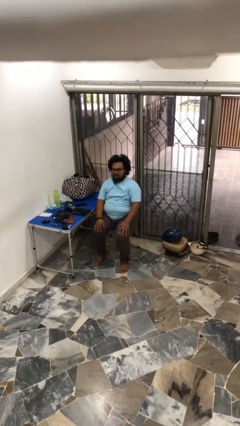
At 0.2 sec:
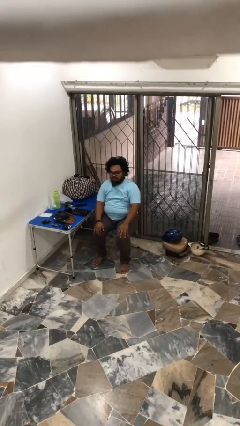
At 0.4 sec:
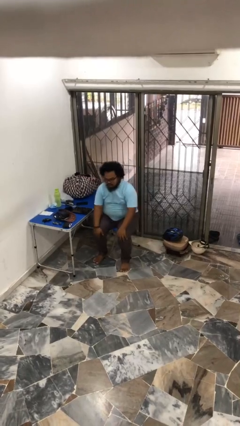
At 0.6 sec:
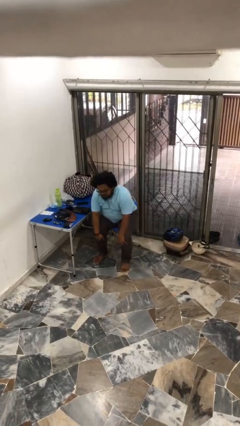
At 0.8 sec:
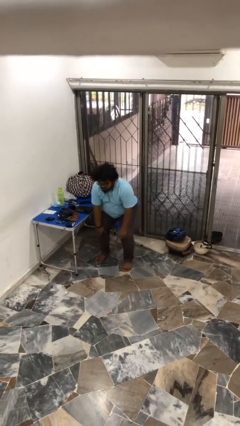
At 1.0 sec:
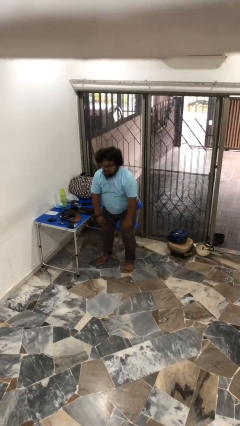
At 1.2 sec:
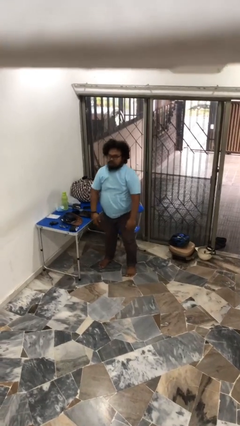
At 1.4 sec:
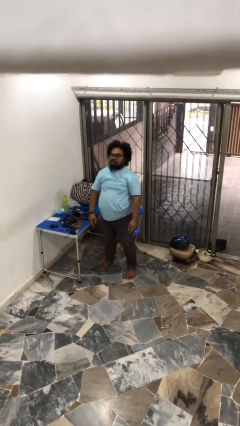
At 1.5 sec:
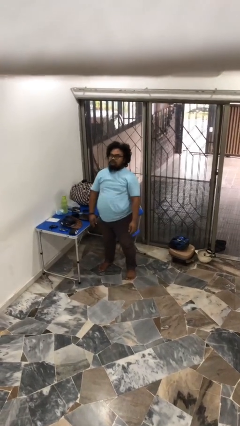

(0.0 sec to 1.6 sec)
person stands up

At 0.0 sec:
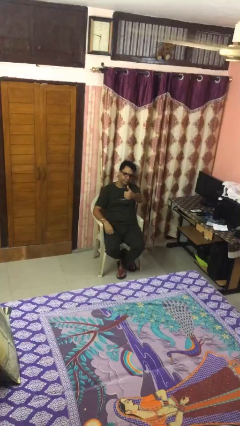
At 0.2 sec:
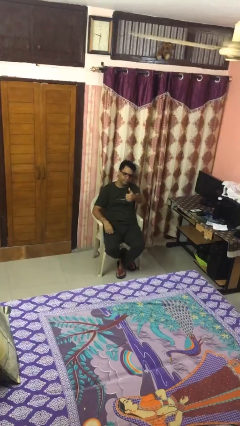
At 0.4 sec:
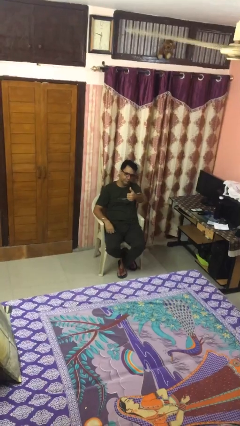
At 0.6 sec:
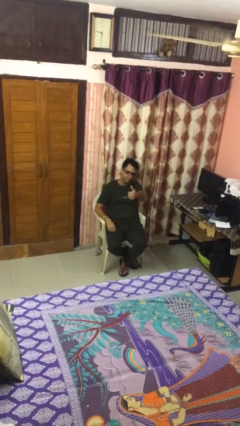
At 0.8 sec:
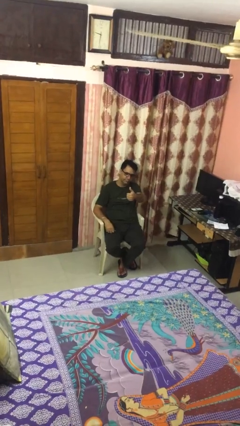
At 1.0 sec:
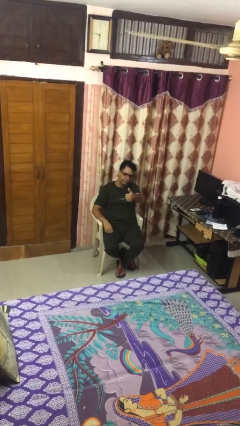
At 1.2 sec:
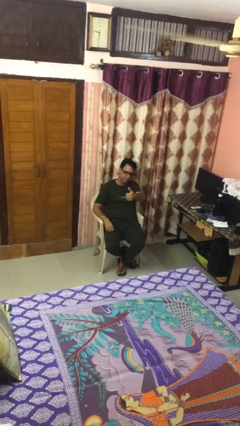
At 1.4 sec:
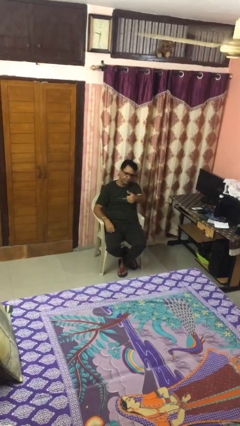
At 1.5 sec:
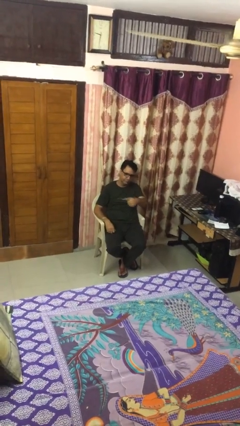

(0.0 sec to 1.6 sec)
person gestures thumbs up

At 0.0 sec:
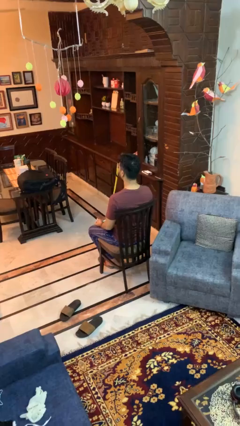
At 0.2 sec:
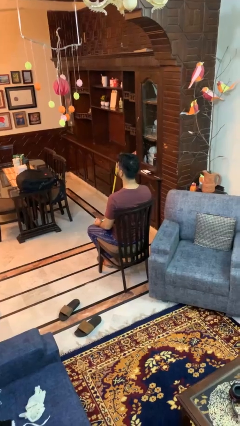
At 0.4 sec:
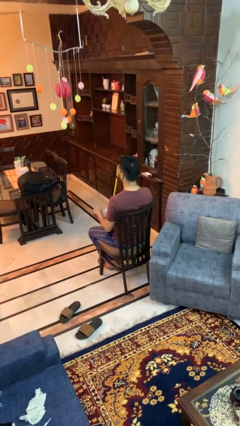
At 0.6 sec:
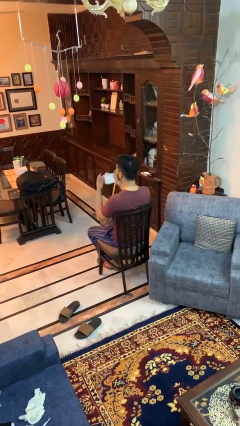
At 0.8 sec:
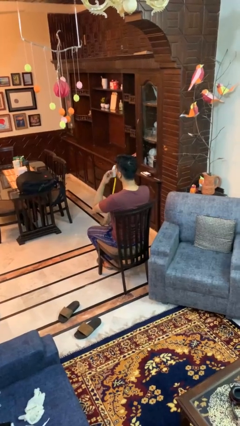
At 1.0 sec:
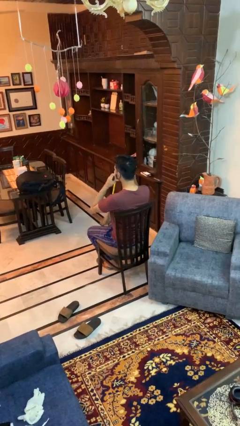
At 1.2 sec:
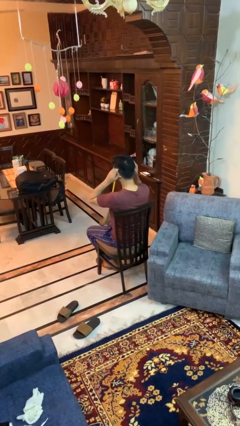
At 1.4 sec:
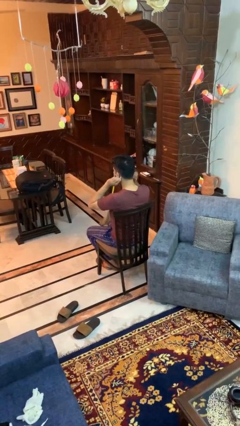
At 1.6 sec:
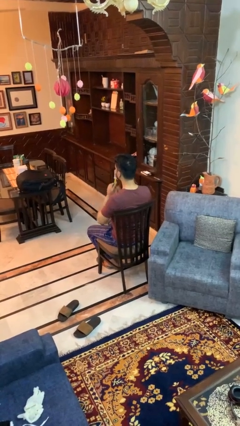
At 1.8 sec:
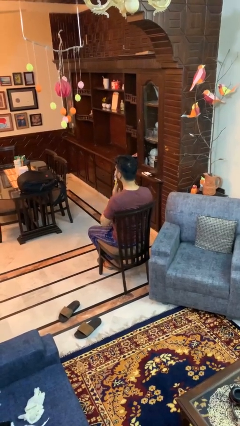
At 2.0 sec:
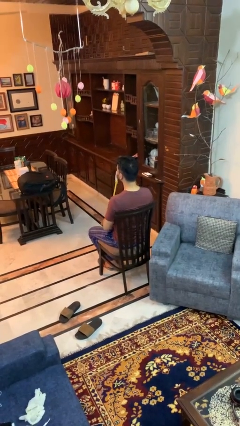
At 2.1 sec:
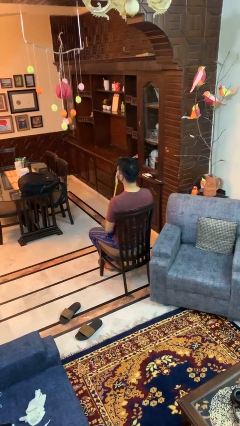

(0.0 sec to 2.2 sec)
person puts on facemask

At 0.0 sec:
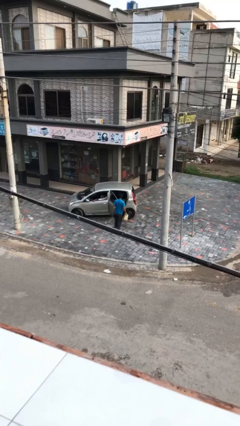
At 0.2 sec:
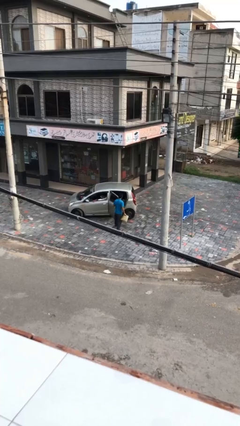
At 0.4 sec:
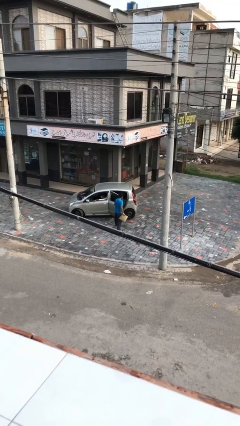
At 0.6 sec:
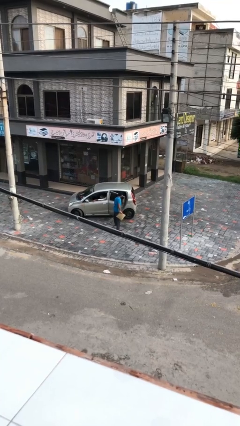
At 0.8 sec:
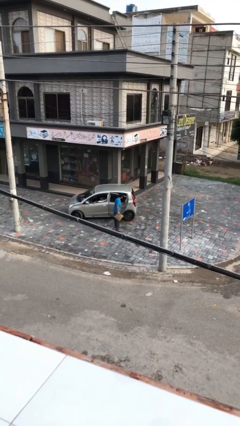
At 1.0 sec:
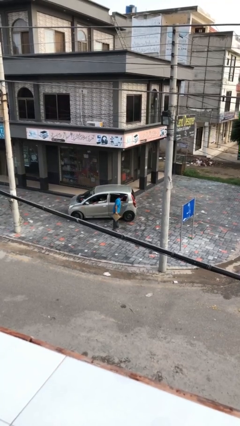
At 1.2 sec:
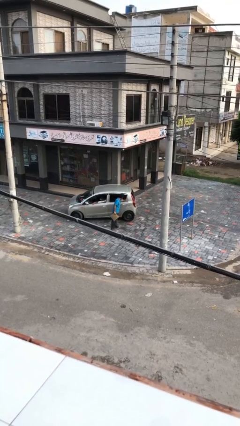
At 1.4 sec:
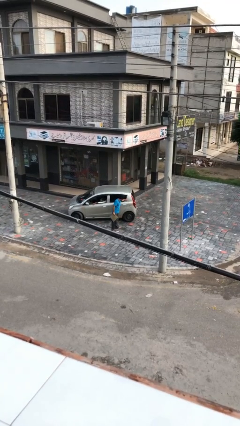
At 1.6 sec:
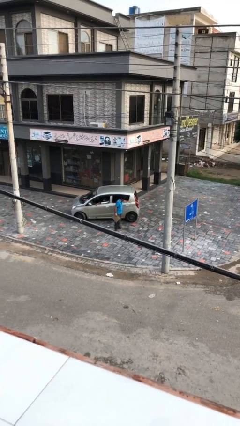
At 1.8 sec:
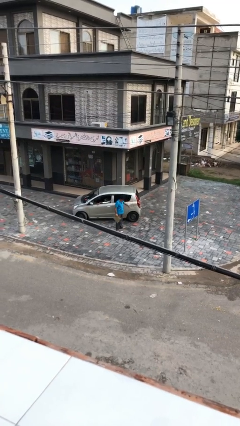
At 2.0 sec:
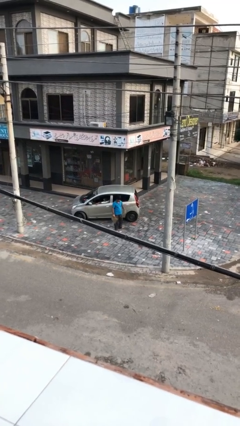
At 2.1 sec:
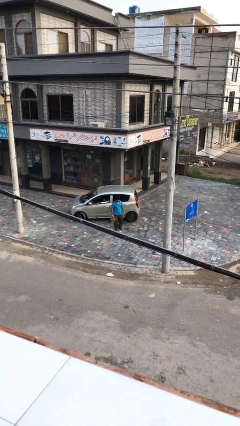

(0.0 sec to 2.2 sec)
person closes car door

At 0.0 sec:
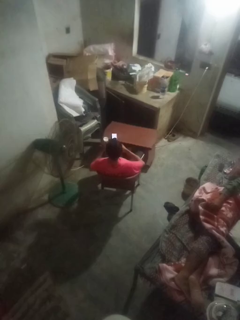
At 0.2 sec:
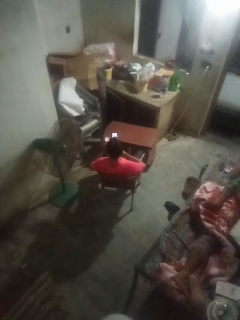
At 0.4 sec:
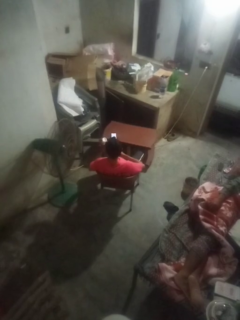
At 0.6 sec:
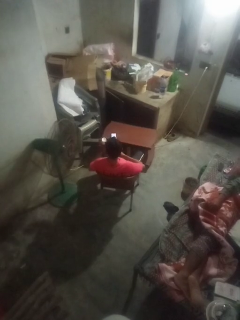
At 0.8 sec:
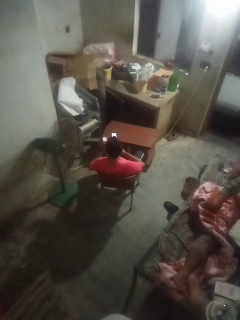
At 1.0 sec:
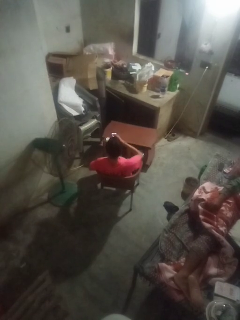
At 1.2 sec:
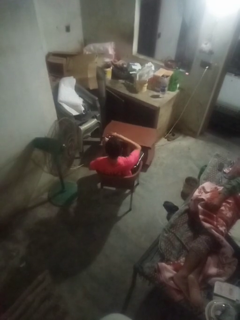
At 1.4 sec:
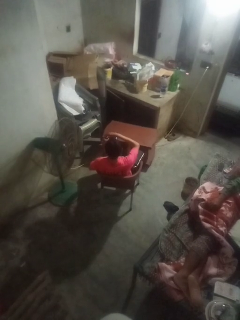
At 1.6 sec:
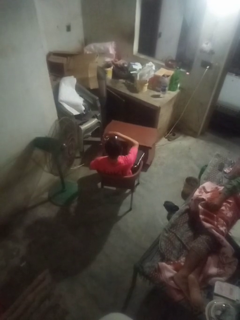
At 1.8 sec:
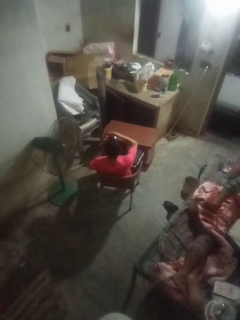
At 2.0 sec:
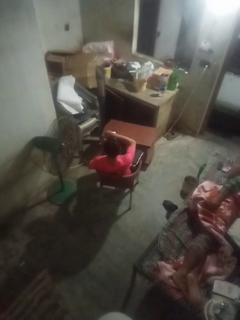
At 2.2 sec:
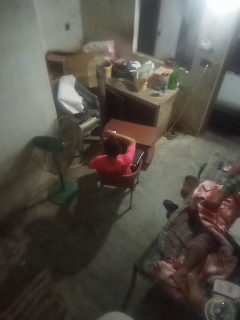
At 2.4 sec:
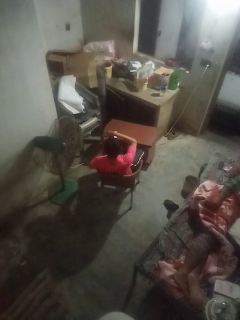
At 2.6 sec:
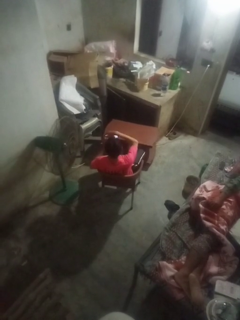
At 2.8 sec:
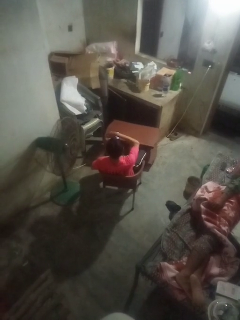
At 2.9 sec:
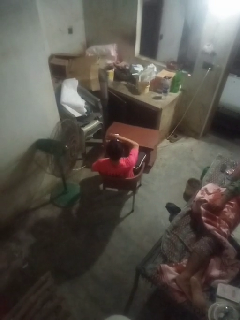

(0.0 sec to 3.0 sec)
person closes jar

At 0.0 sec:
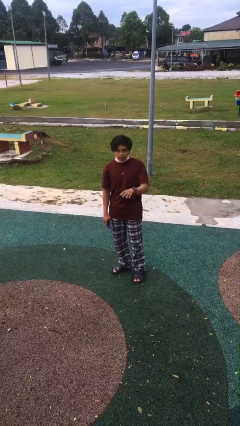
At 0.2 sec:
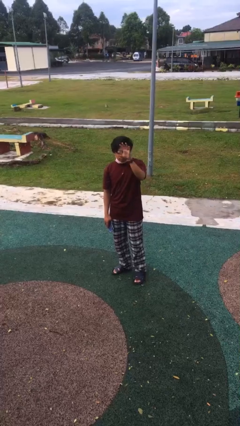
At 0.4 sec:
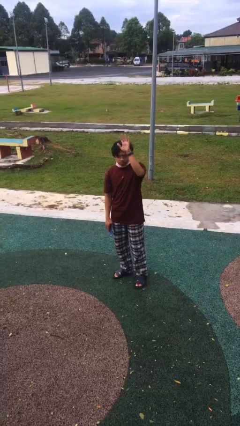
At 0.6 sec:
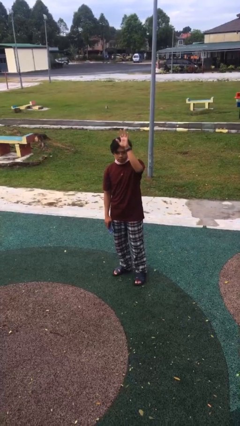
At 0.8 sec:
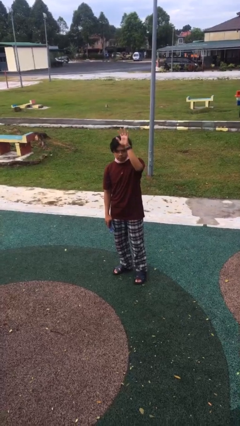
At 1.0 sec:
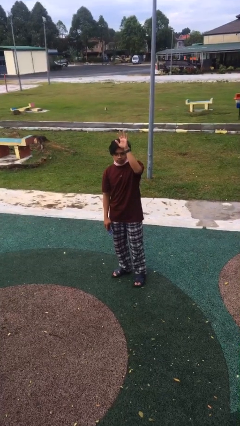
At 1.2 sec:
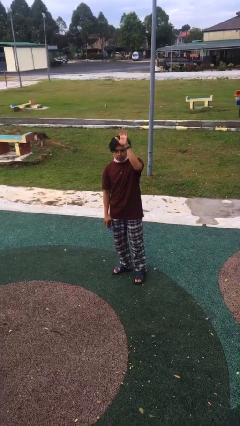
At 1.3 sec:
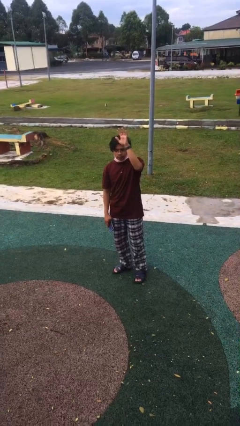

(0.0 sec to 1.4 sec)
person gestures raise hand

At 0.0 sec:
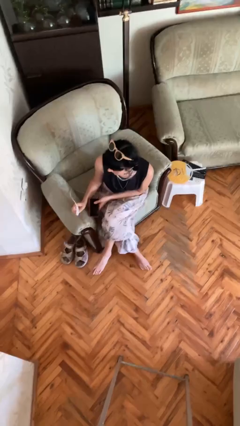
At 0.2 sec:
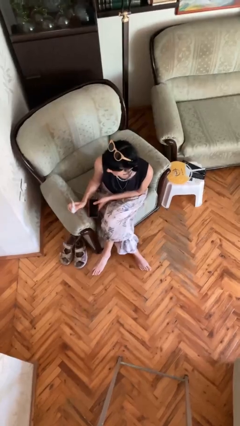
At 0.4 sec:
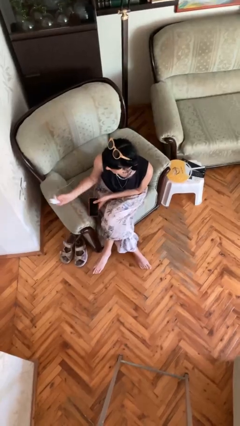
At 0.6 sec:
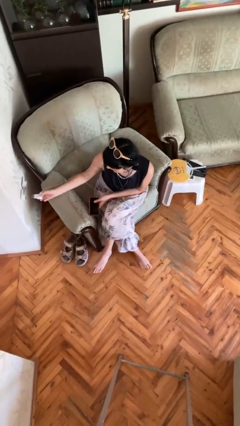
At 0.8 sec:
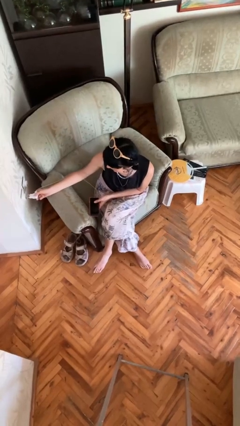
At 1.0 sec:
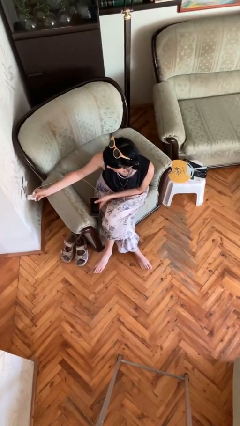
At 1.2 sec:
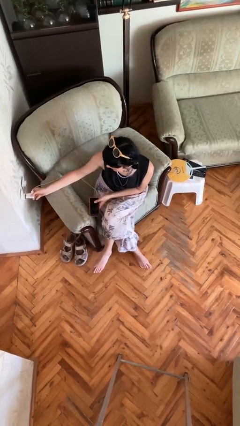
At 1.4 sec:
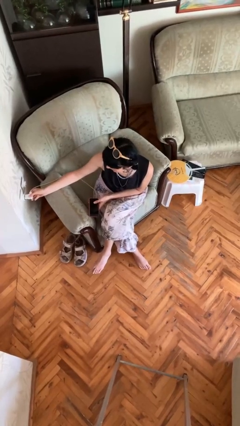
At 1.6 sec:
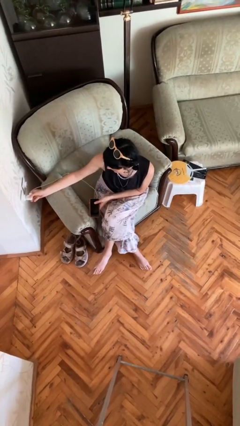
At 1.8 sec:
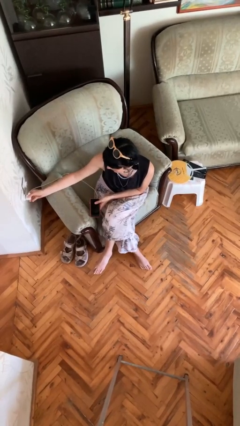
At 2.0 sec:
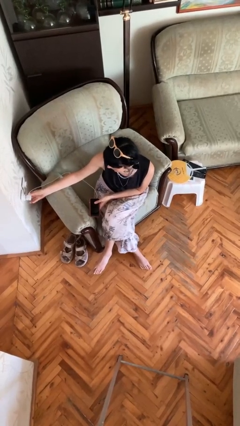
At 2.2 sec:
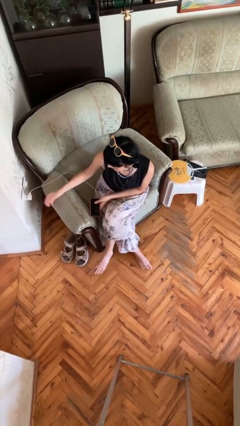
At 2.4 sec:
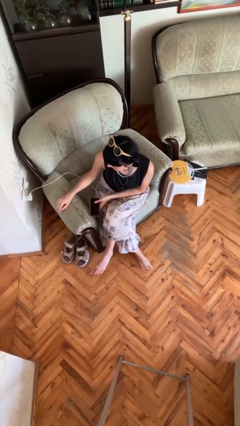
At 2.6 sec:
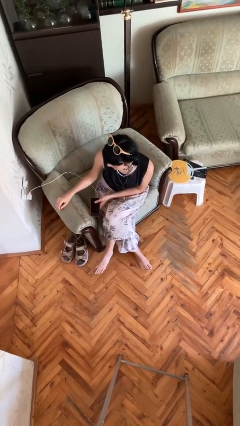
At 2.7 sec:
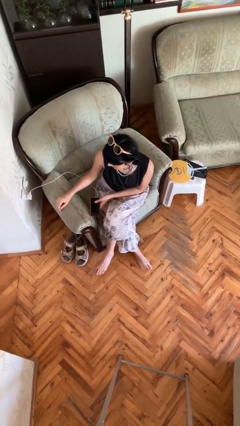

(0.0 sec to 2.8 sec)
person plugs into electrical socket

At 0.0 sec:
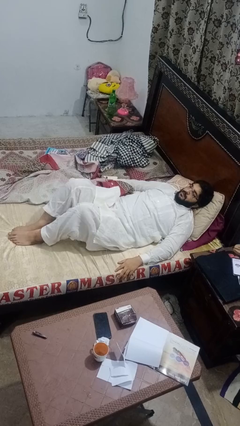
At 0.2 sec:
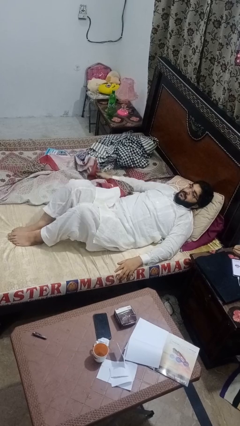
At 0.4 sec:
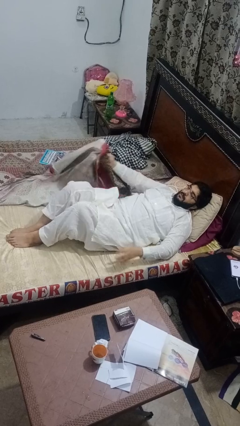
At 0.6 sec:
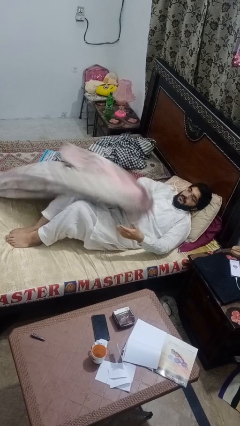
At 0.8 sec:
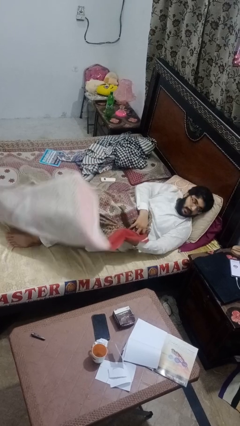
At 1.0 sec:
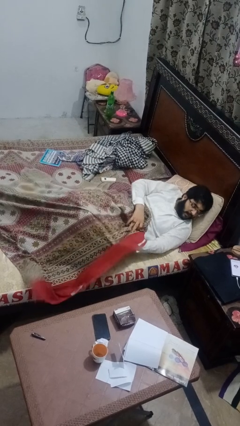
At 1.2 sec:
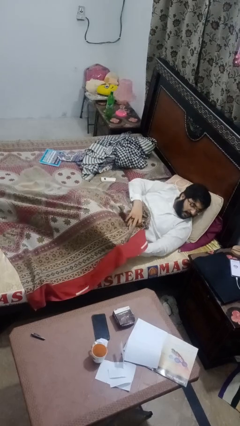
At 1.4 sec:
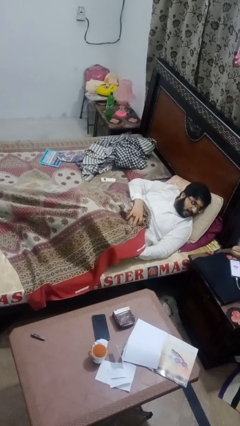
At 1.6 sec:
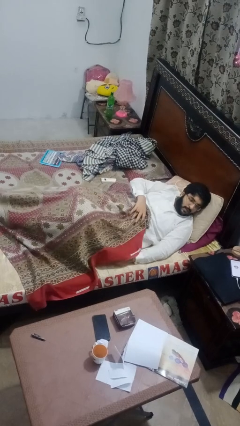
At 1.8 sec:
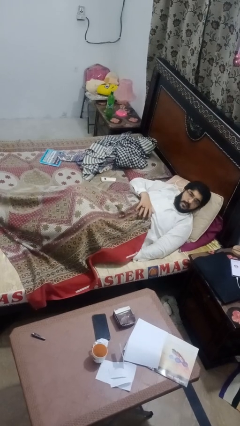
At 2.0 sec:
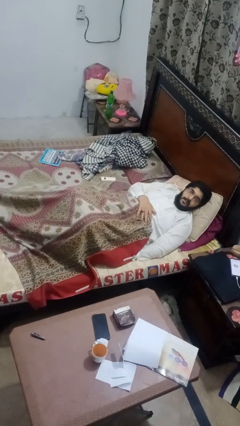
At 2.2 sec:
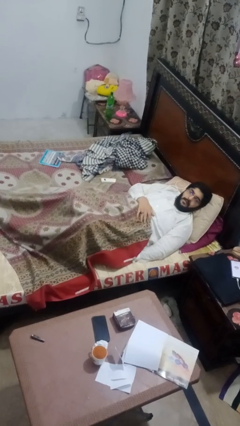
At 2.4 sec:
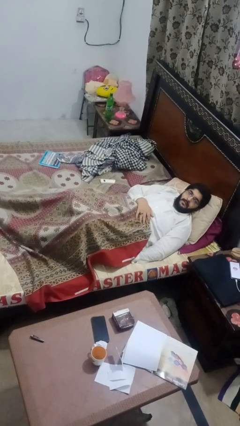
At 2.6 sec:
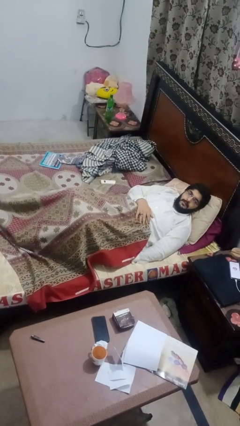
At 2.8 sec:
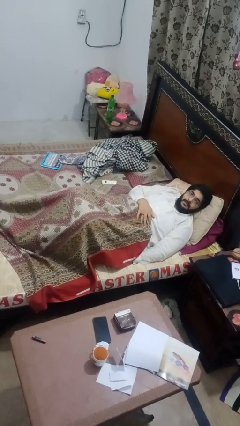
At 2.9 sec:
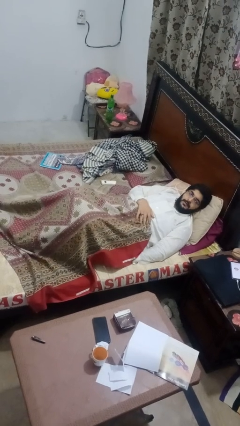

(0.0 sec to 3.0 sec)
person covers with bedsheets
